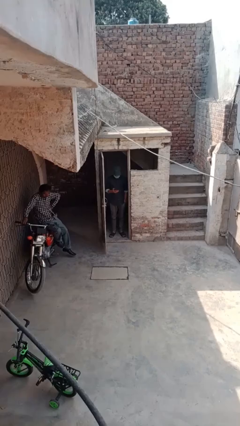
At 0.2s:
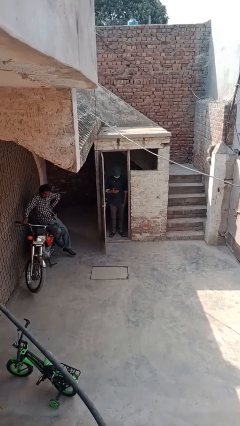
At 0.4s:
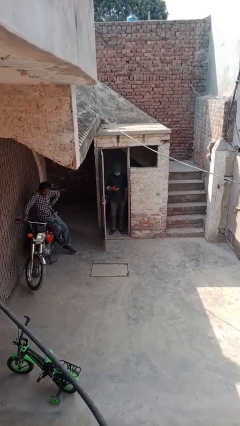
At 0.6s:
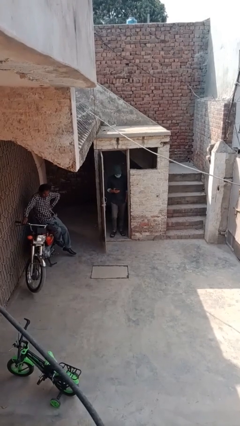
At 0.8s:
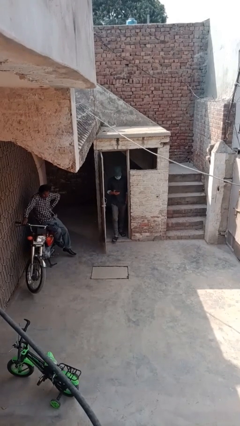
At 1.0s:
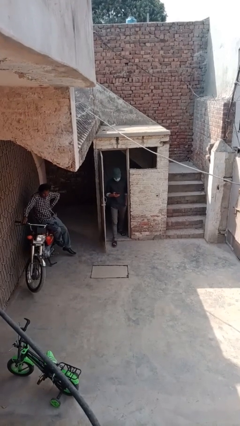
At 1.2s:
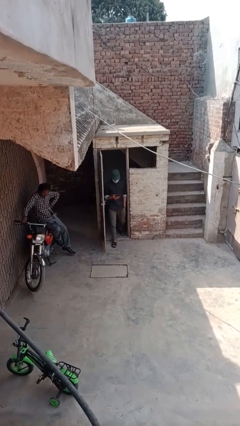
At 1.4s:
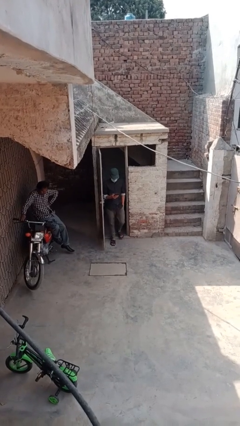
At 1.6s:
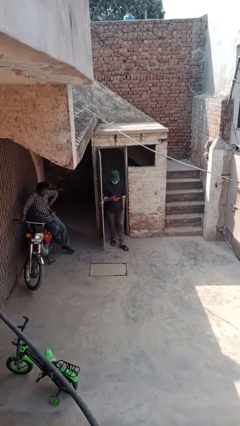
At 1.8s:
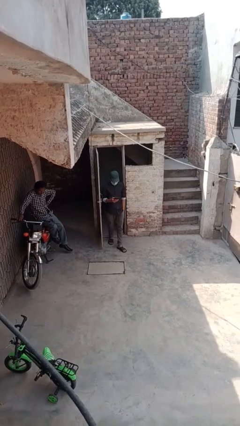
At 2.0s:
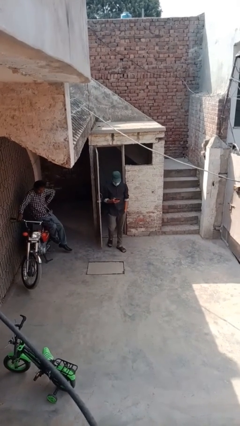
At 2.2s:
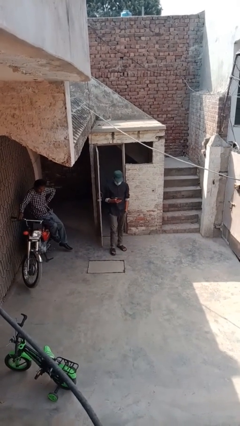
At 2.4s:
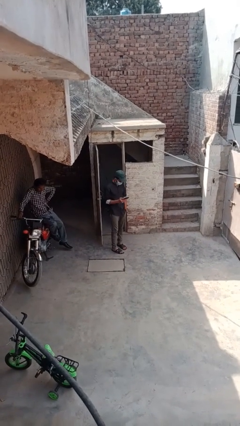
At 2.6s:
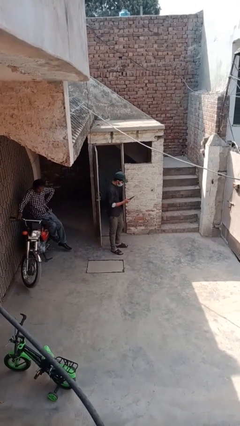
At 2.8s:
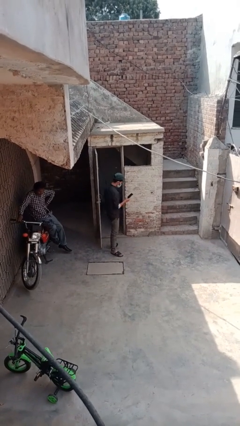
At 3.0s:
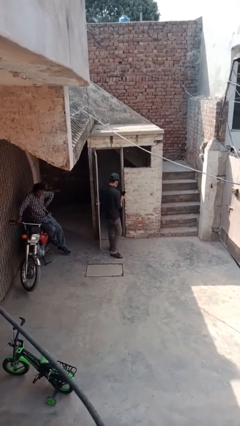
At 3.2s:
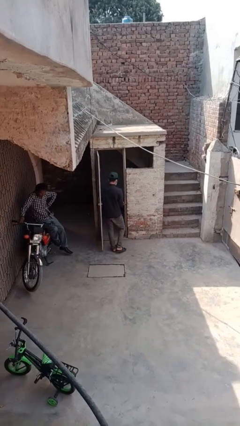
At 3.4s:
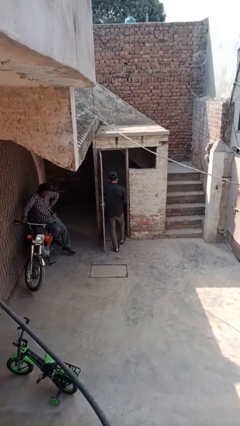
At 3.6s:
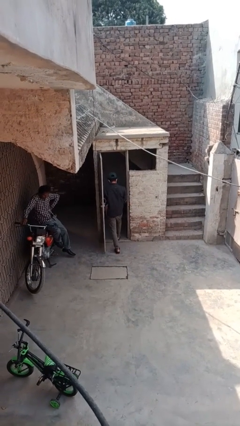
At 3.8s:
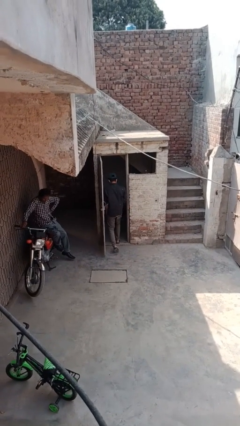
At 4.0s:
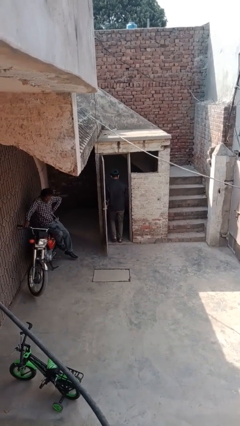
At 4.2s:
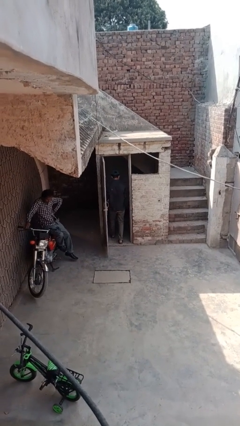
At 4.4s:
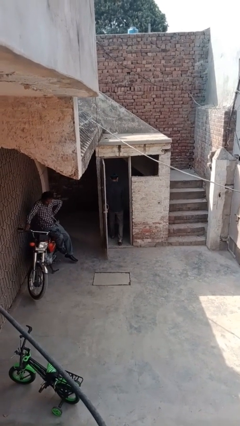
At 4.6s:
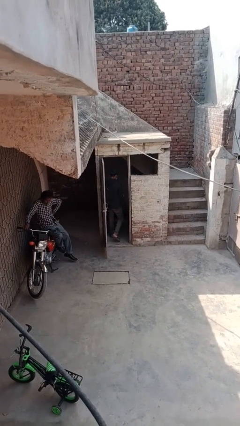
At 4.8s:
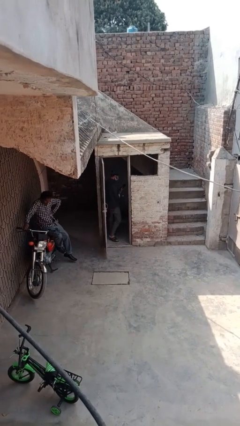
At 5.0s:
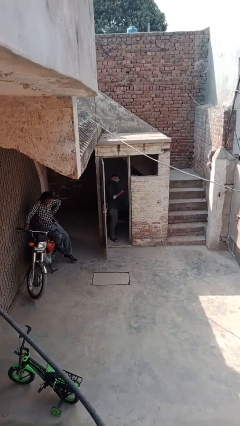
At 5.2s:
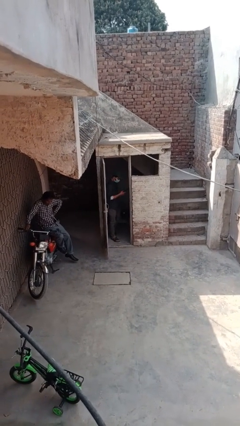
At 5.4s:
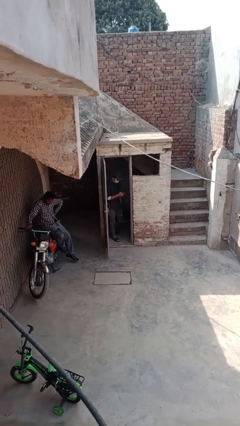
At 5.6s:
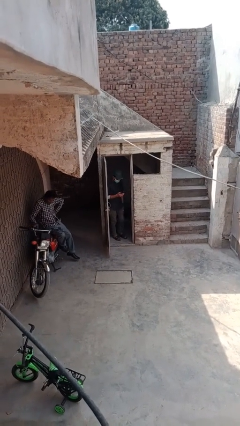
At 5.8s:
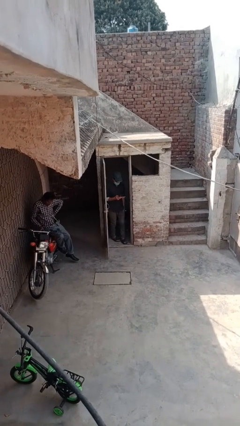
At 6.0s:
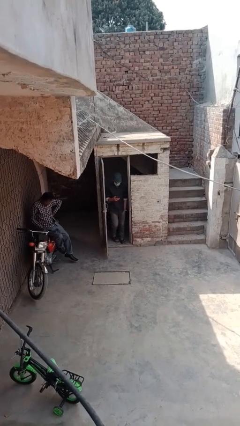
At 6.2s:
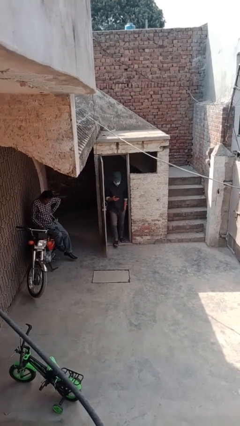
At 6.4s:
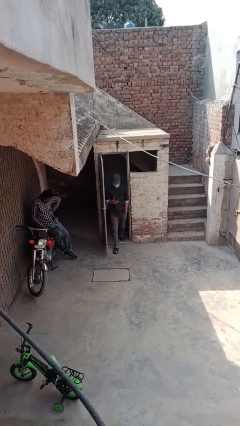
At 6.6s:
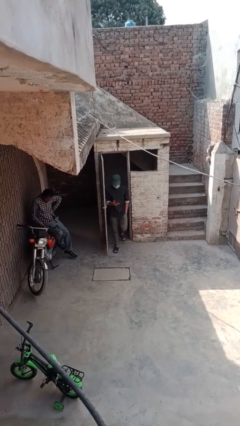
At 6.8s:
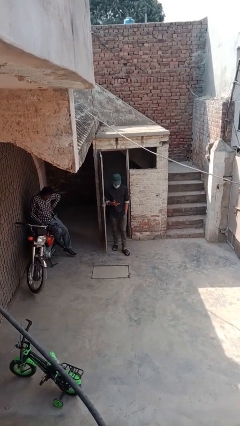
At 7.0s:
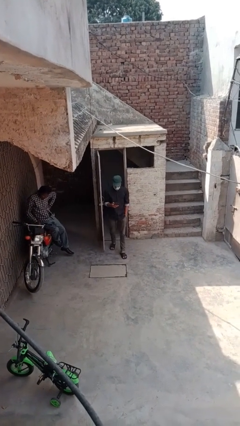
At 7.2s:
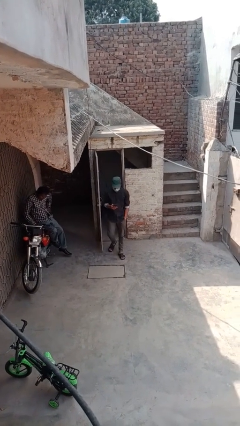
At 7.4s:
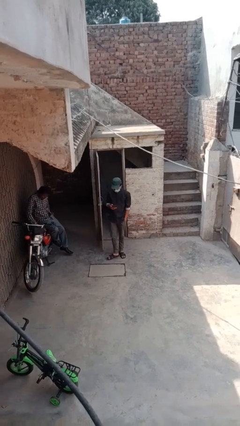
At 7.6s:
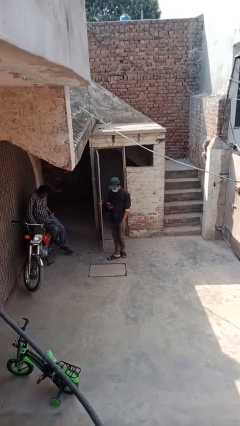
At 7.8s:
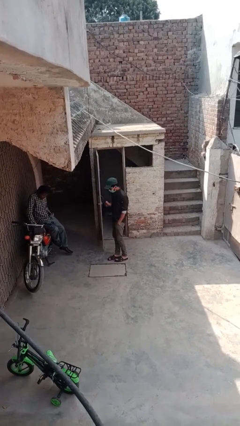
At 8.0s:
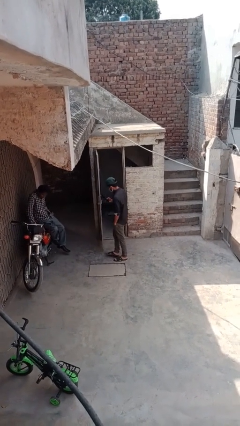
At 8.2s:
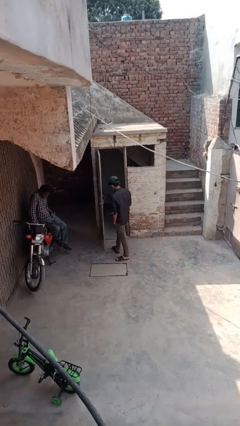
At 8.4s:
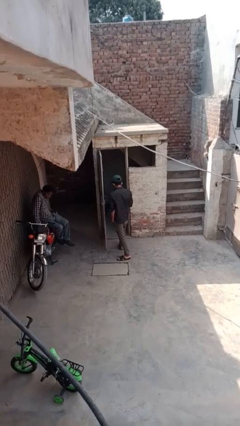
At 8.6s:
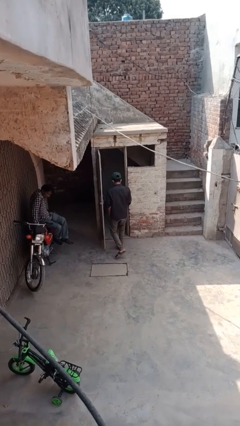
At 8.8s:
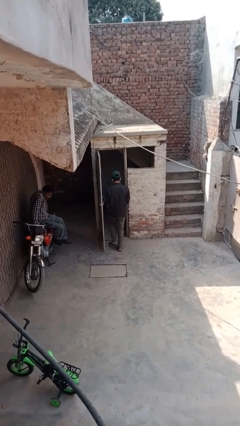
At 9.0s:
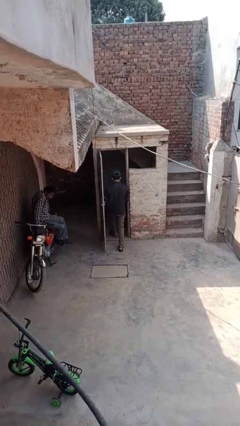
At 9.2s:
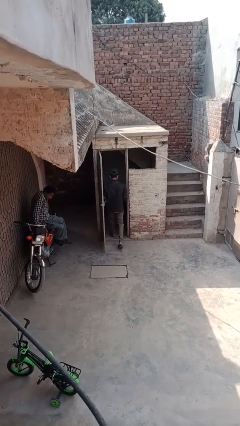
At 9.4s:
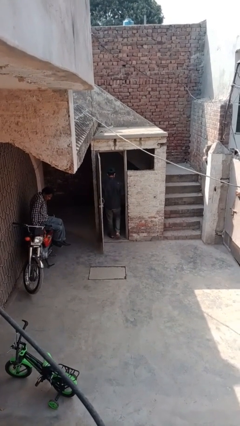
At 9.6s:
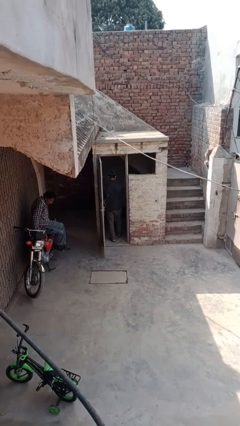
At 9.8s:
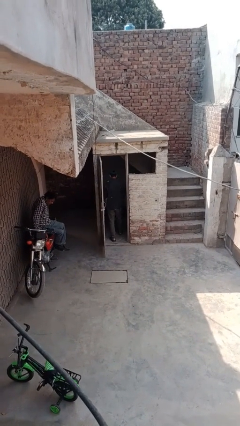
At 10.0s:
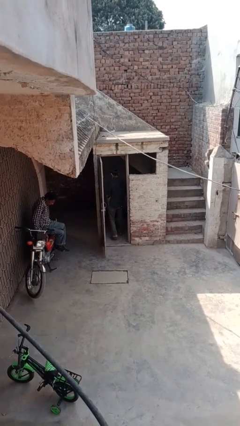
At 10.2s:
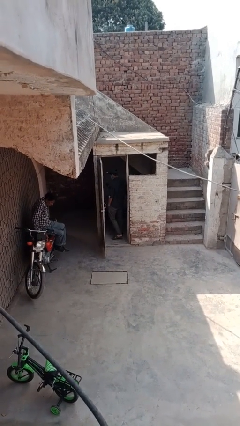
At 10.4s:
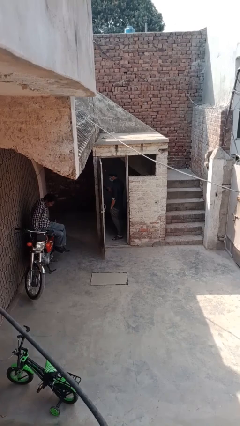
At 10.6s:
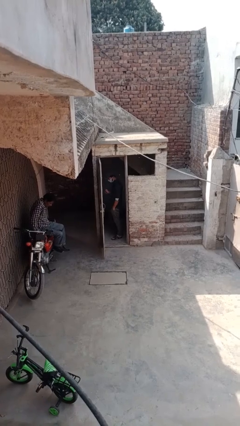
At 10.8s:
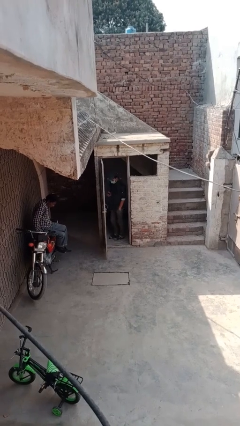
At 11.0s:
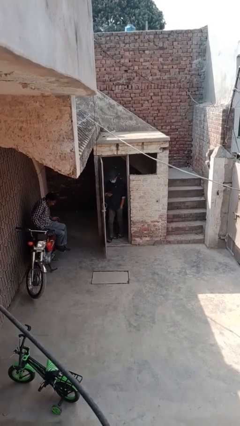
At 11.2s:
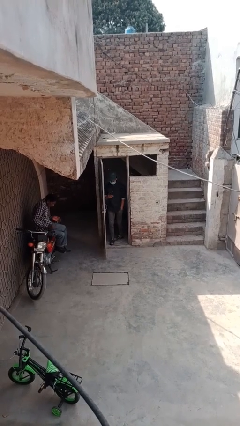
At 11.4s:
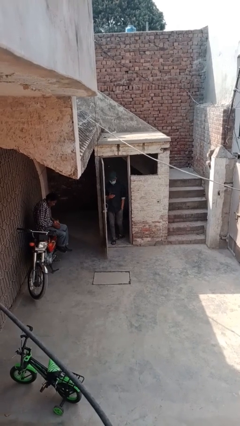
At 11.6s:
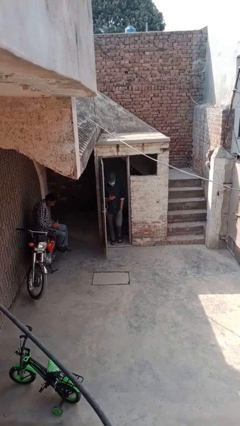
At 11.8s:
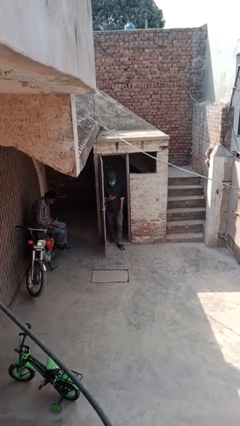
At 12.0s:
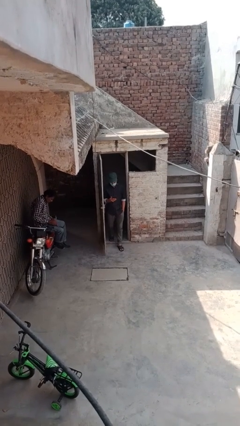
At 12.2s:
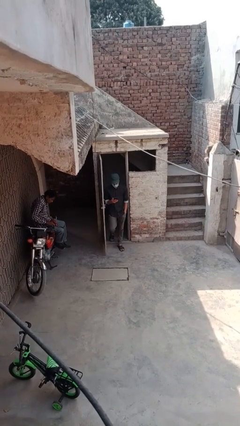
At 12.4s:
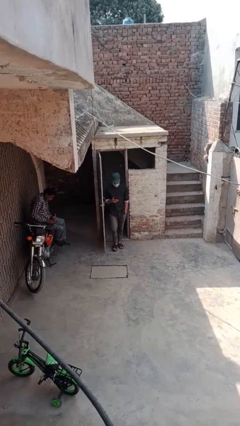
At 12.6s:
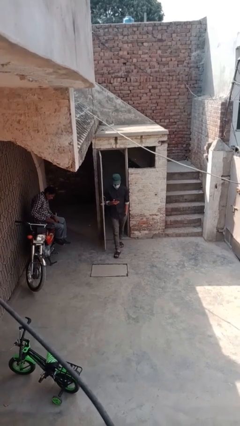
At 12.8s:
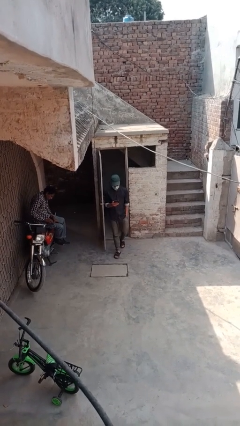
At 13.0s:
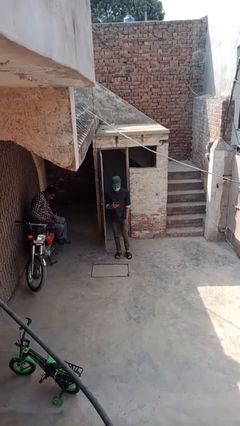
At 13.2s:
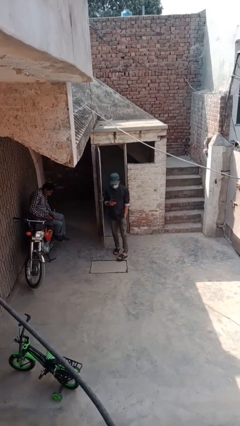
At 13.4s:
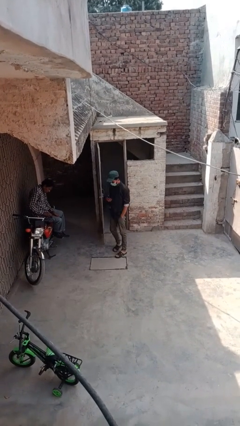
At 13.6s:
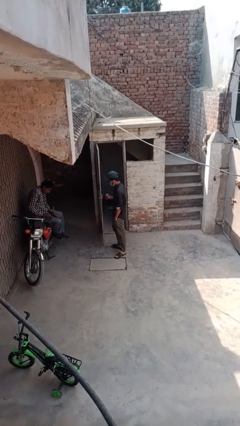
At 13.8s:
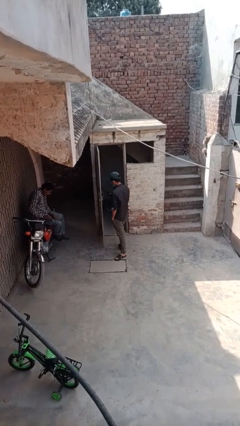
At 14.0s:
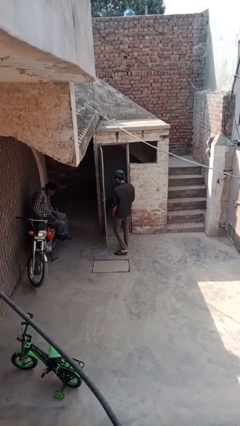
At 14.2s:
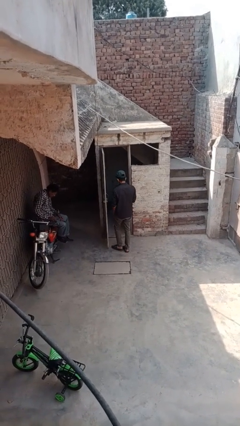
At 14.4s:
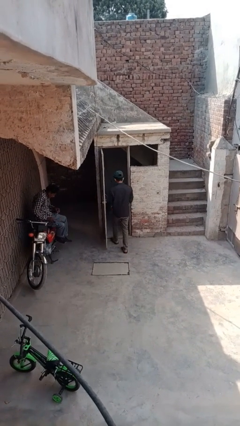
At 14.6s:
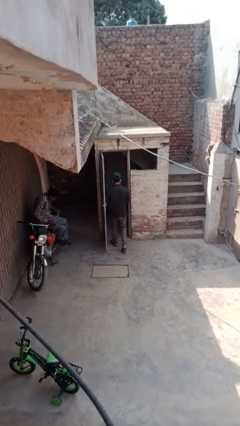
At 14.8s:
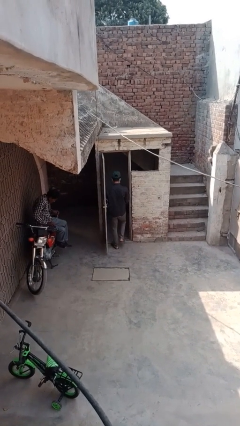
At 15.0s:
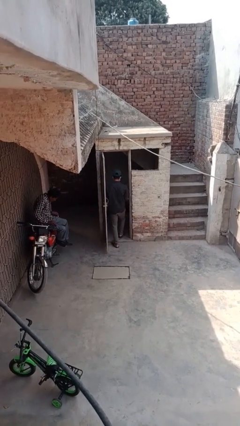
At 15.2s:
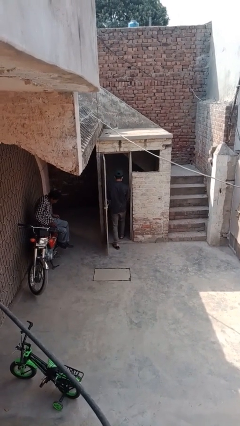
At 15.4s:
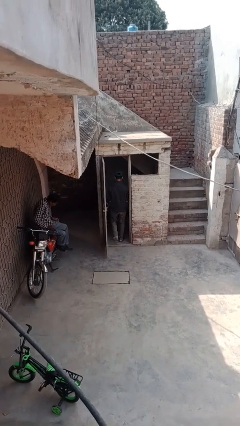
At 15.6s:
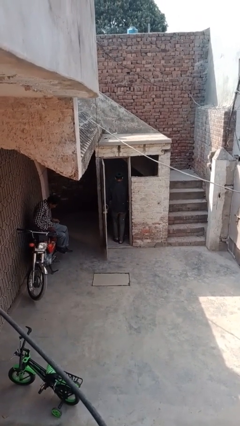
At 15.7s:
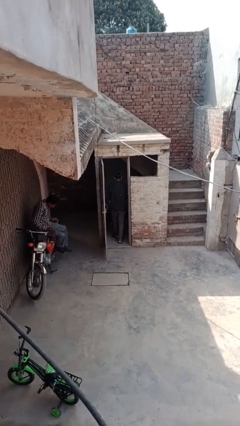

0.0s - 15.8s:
person texts on phone

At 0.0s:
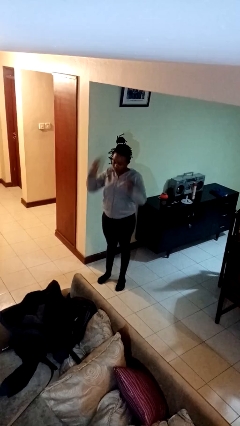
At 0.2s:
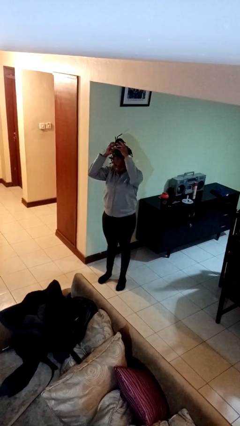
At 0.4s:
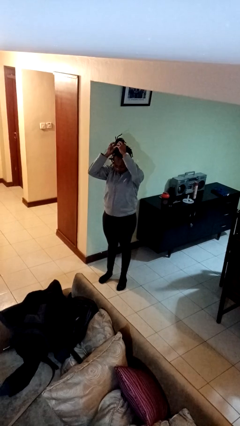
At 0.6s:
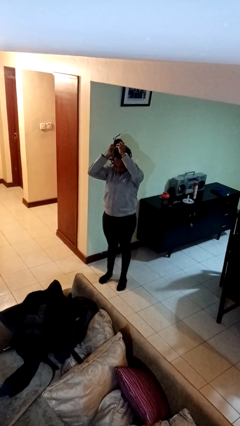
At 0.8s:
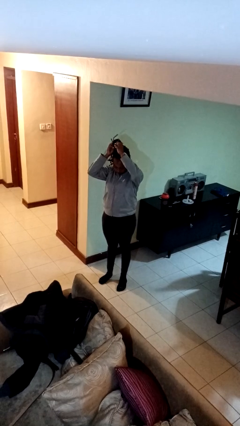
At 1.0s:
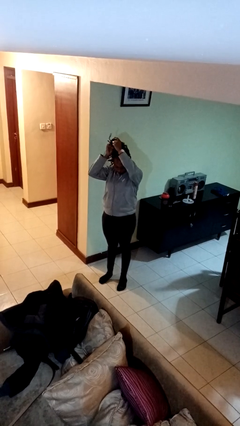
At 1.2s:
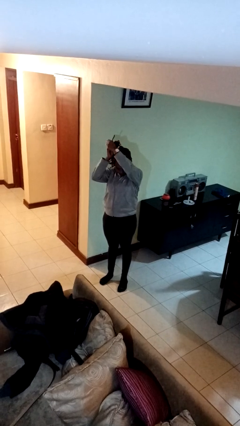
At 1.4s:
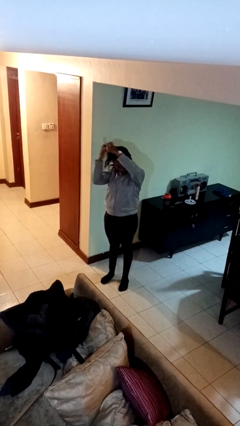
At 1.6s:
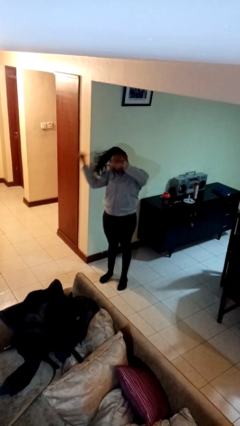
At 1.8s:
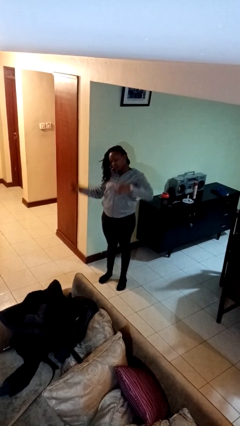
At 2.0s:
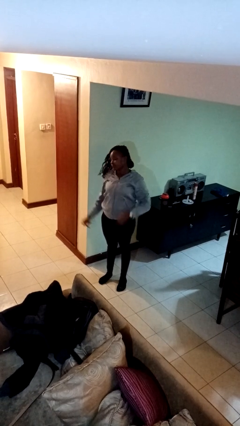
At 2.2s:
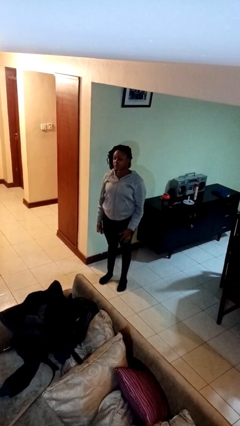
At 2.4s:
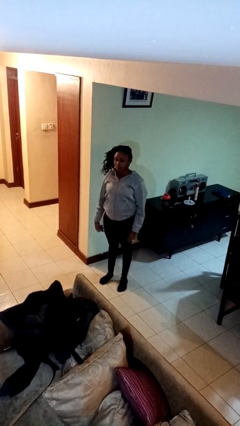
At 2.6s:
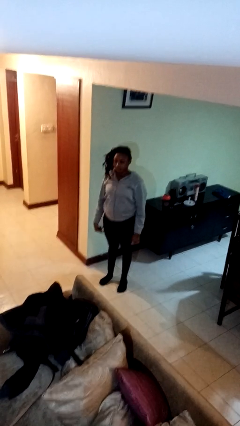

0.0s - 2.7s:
person takes off hairtie
